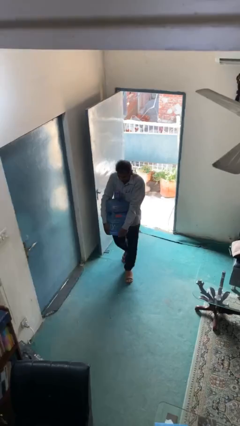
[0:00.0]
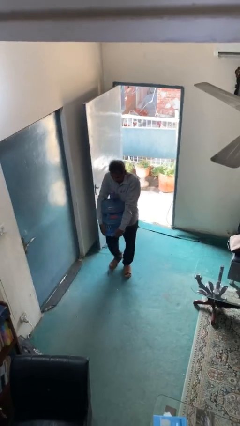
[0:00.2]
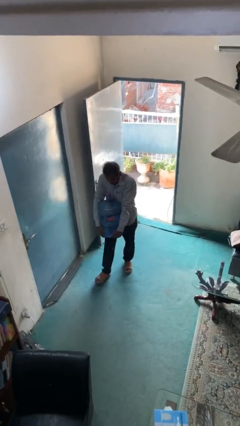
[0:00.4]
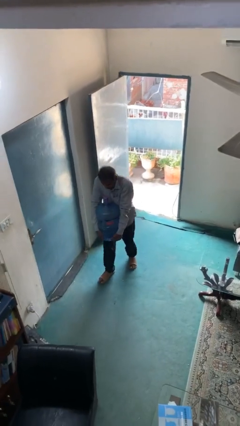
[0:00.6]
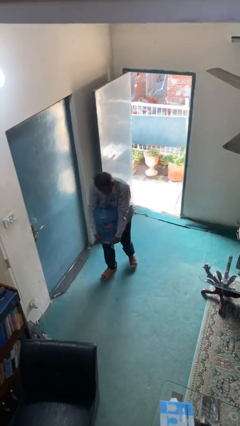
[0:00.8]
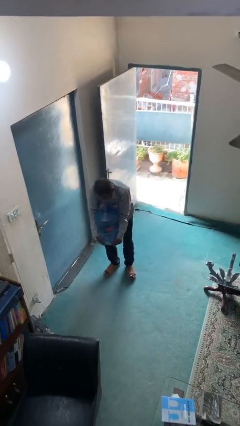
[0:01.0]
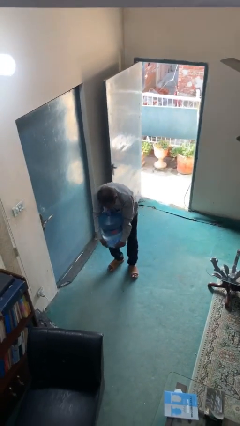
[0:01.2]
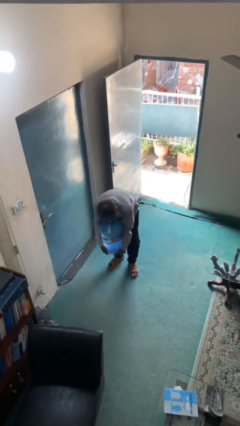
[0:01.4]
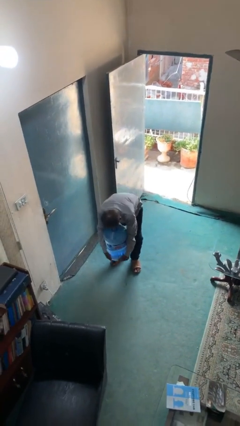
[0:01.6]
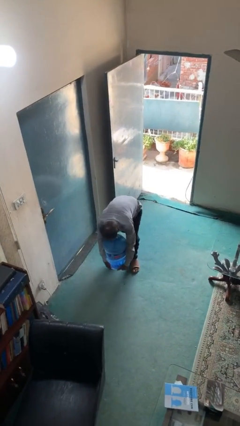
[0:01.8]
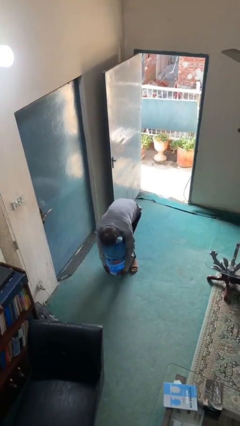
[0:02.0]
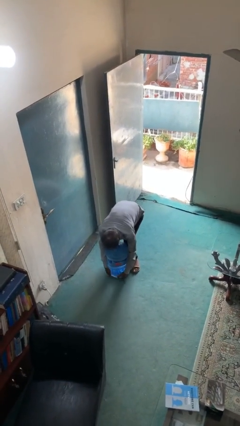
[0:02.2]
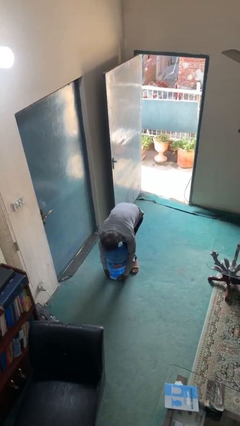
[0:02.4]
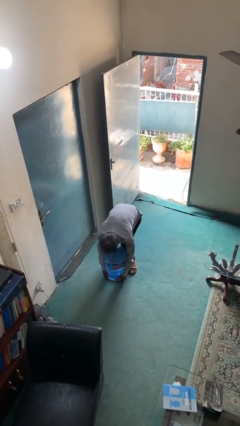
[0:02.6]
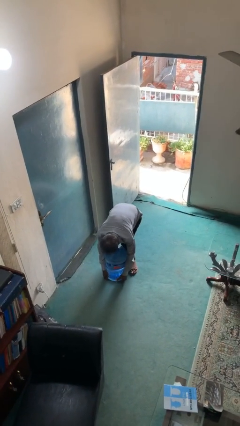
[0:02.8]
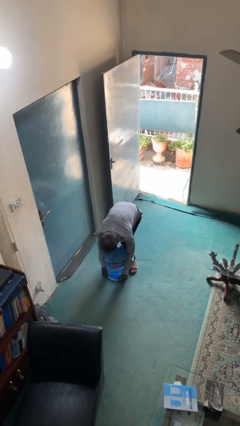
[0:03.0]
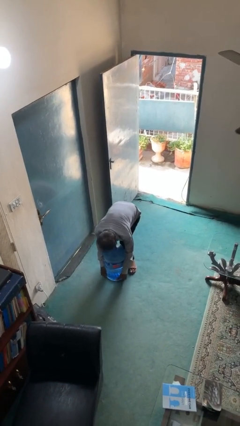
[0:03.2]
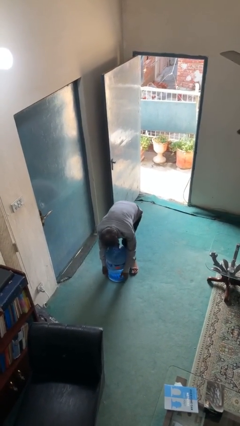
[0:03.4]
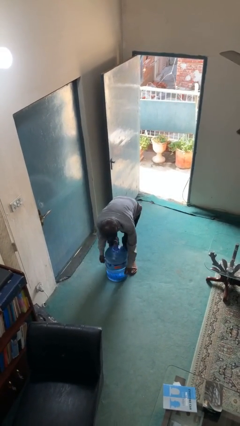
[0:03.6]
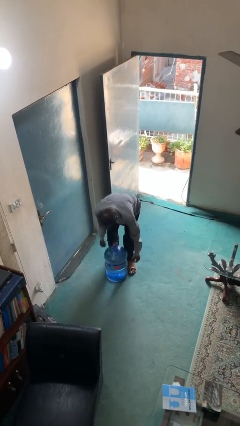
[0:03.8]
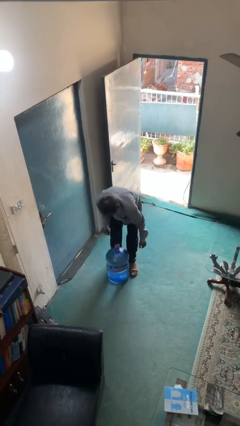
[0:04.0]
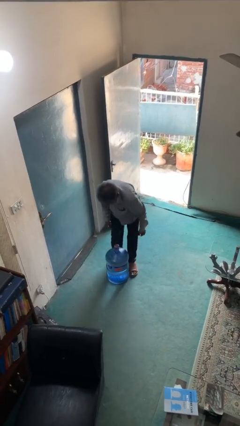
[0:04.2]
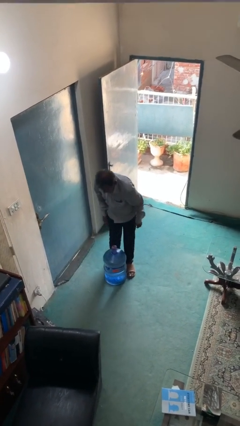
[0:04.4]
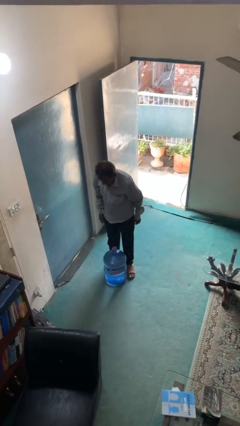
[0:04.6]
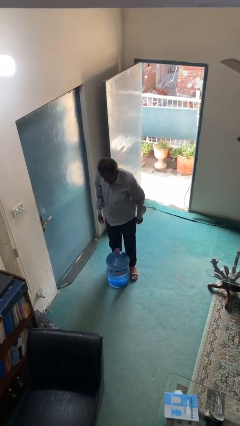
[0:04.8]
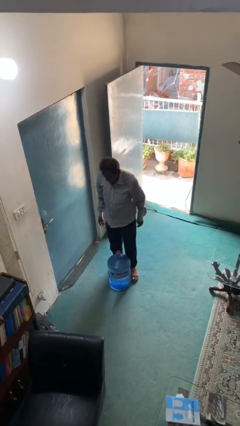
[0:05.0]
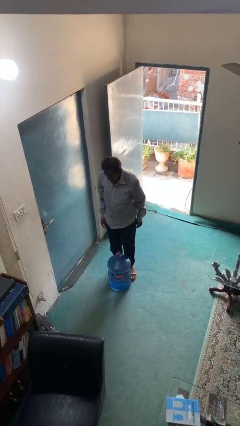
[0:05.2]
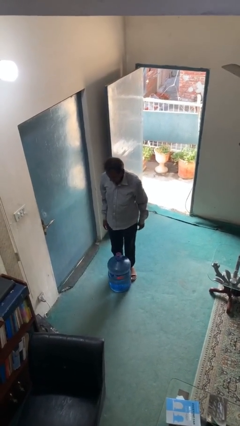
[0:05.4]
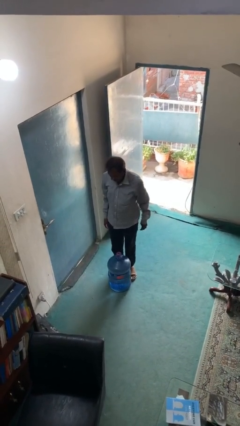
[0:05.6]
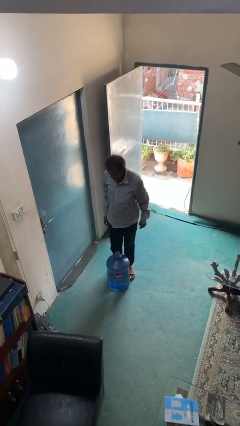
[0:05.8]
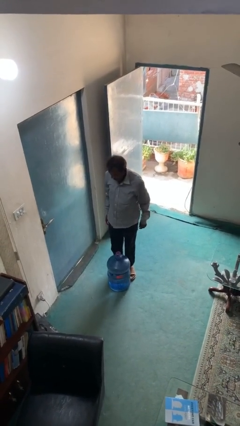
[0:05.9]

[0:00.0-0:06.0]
person puts down object on floor

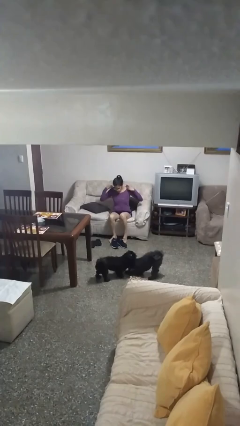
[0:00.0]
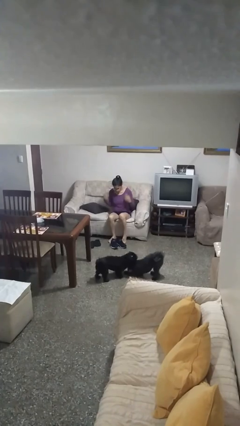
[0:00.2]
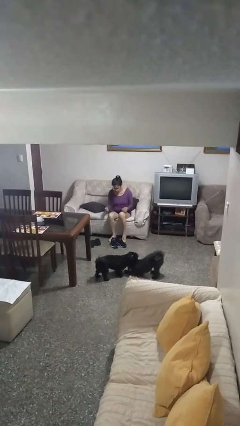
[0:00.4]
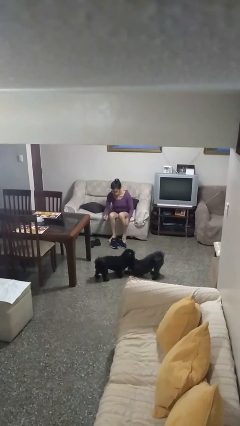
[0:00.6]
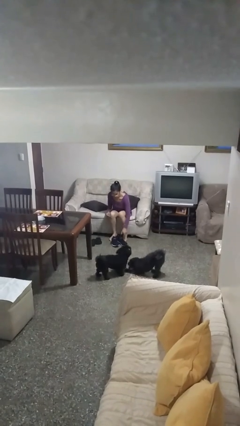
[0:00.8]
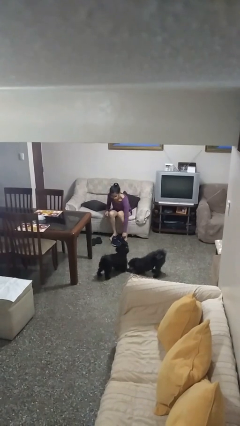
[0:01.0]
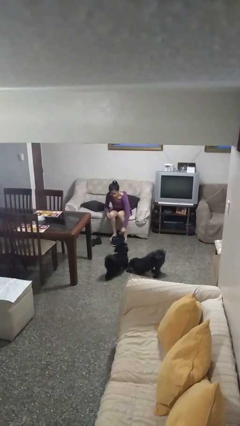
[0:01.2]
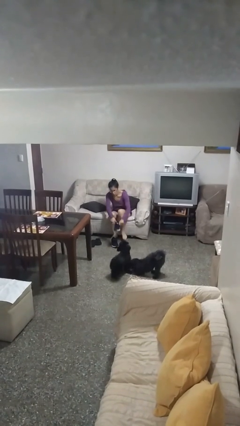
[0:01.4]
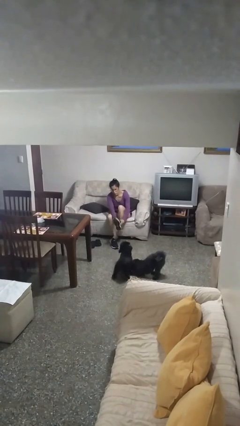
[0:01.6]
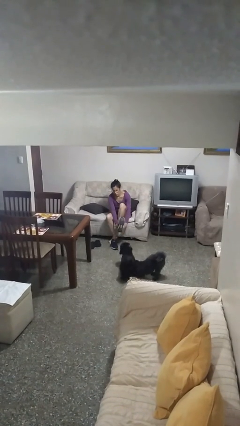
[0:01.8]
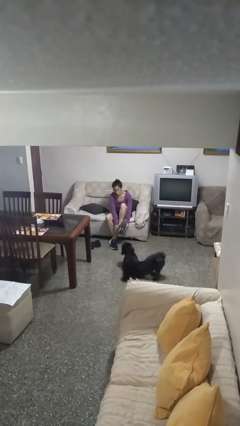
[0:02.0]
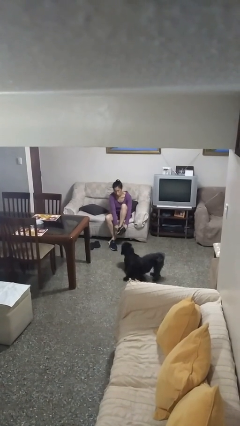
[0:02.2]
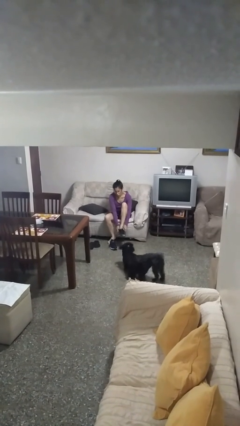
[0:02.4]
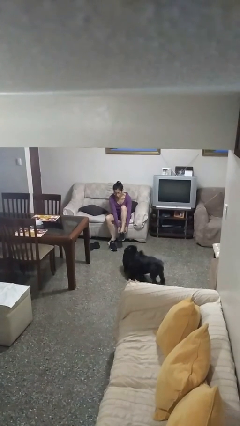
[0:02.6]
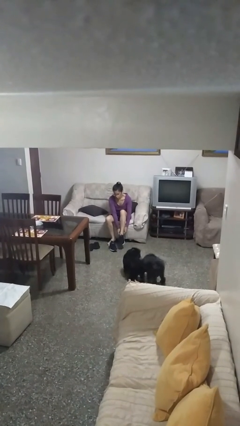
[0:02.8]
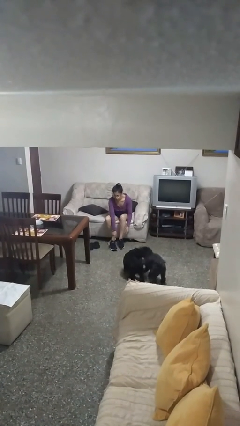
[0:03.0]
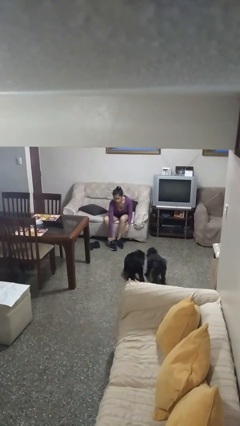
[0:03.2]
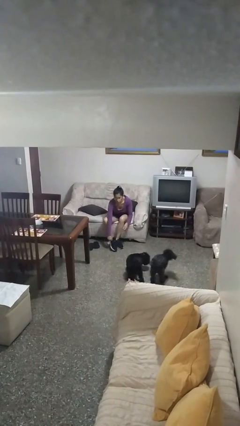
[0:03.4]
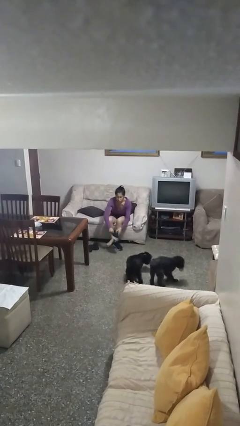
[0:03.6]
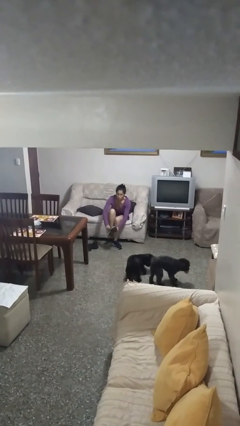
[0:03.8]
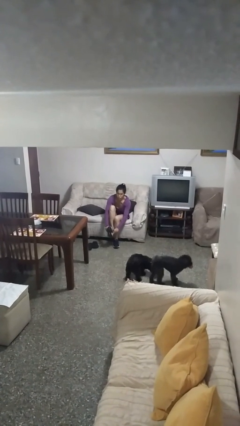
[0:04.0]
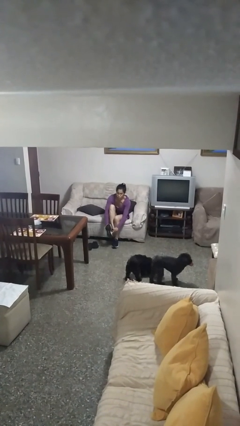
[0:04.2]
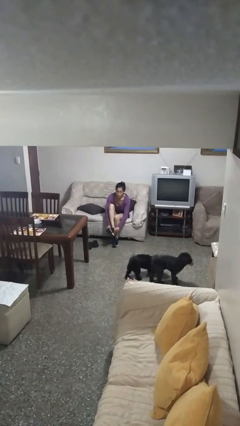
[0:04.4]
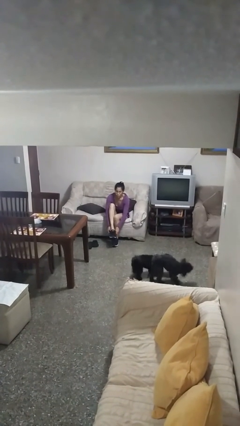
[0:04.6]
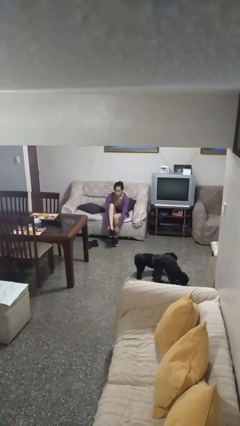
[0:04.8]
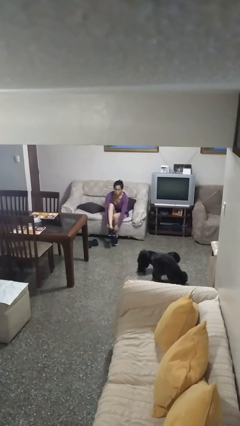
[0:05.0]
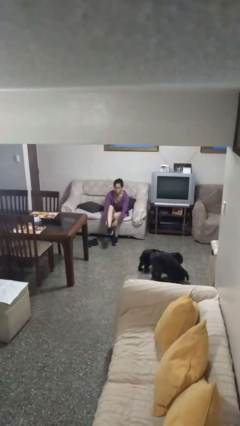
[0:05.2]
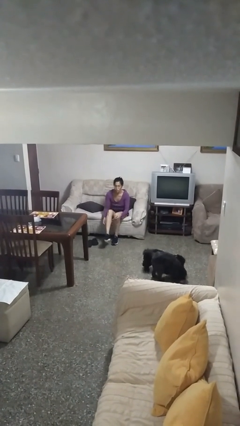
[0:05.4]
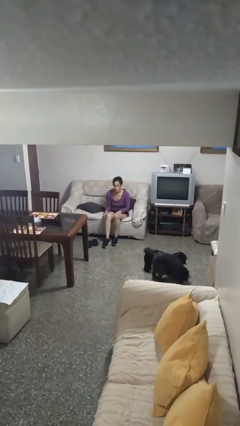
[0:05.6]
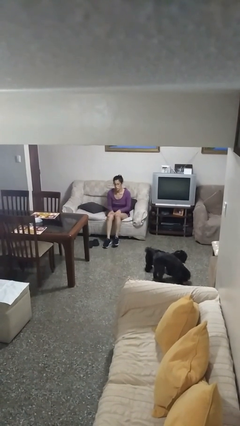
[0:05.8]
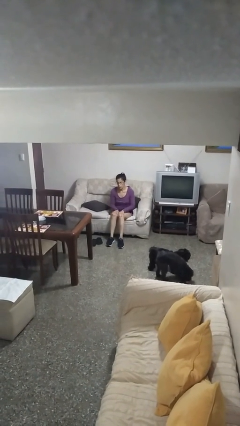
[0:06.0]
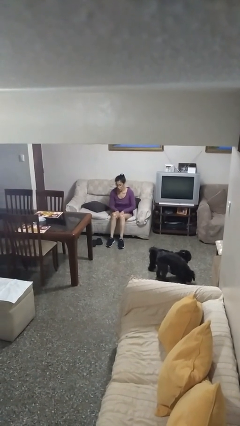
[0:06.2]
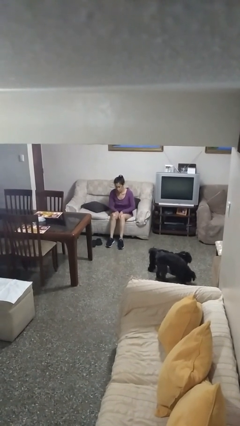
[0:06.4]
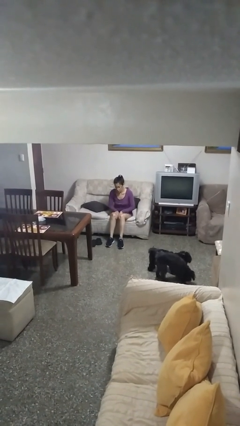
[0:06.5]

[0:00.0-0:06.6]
person puts on shoes

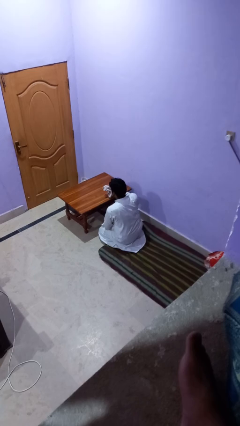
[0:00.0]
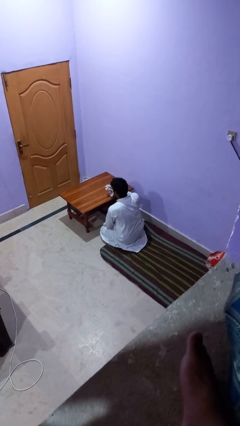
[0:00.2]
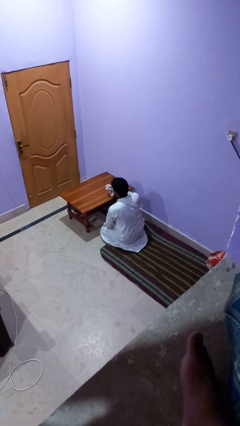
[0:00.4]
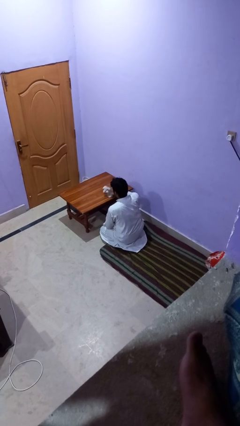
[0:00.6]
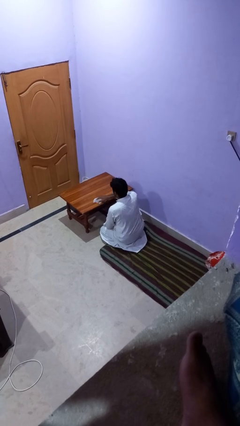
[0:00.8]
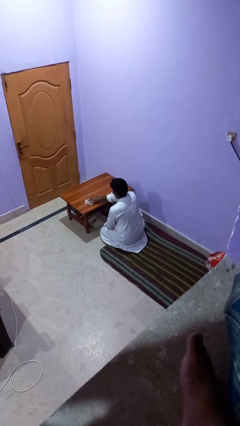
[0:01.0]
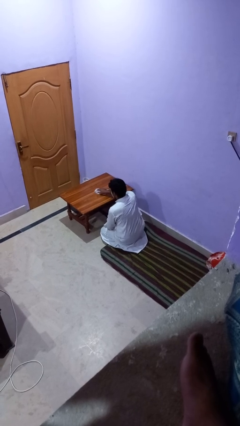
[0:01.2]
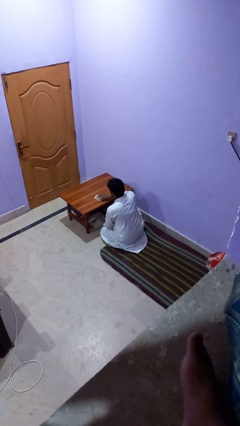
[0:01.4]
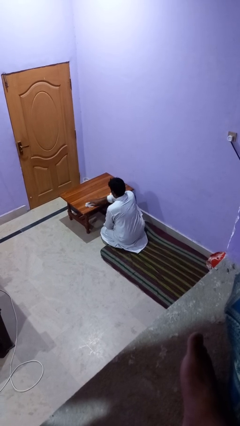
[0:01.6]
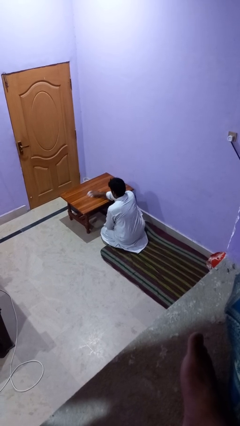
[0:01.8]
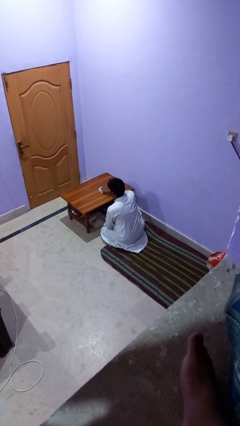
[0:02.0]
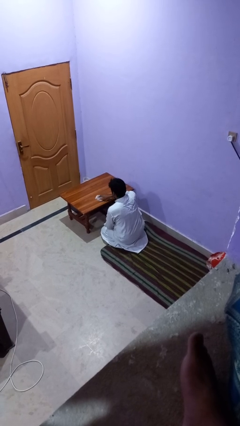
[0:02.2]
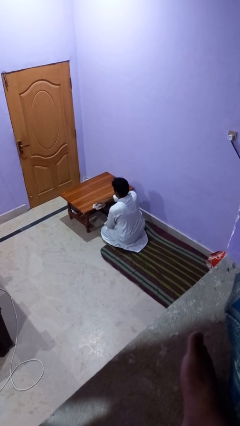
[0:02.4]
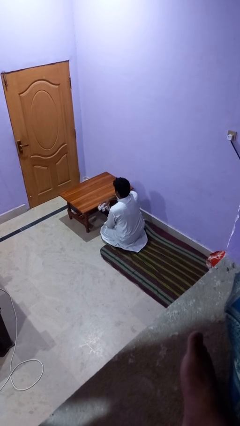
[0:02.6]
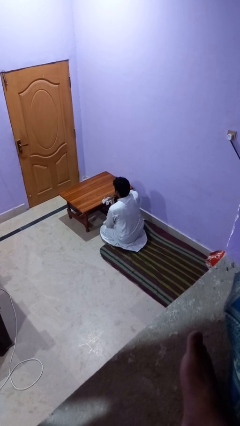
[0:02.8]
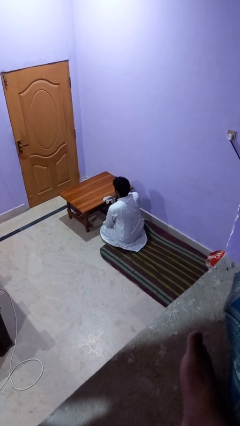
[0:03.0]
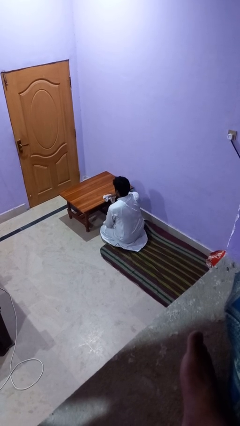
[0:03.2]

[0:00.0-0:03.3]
person cleans table with rag

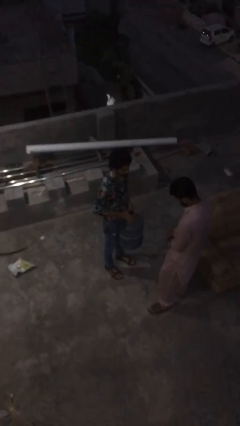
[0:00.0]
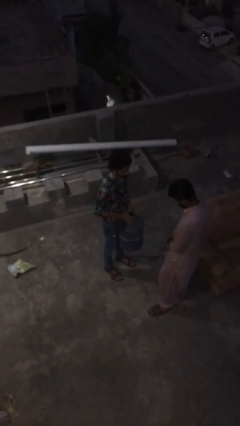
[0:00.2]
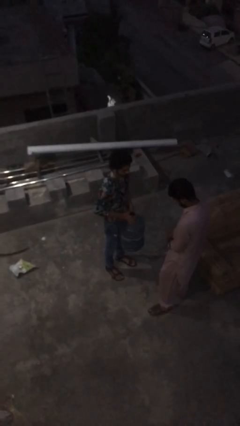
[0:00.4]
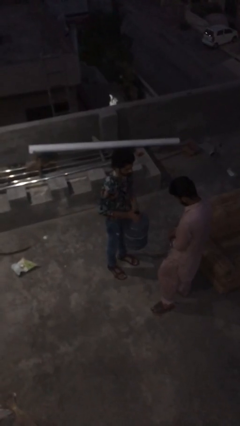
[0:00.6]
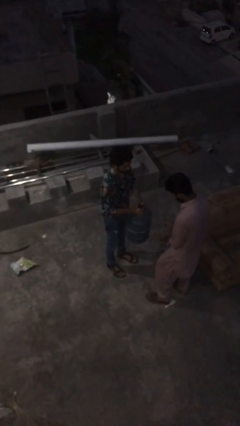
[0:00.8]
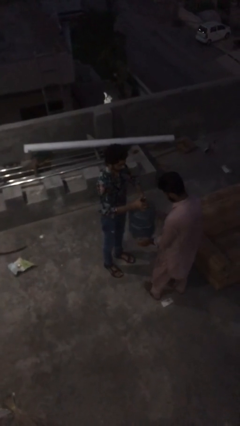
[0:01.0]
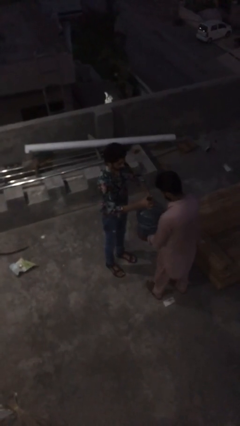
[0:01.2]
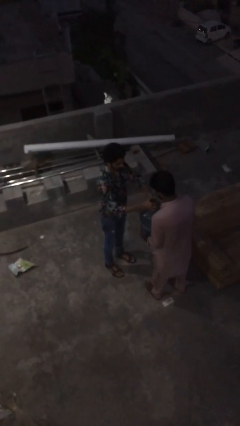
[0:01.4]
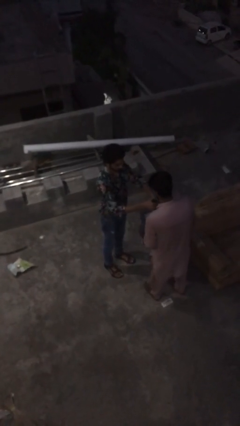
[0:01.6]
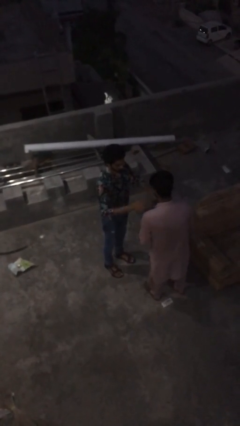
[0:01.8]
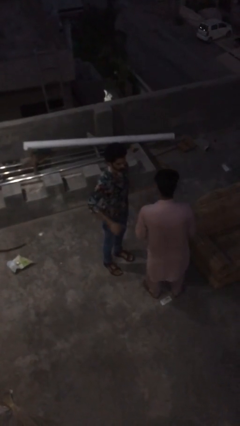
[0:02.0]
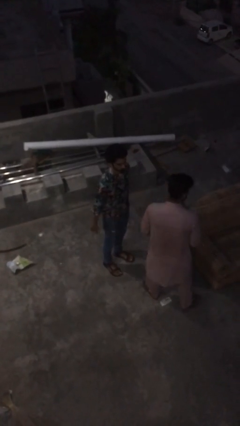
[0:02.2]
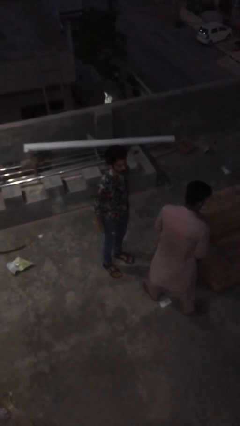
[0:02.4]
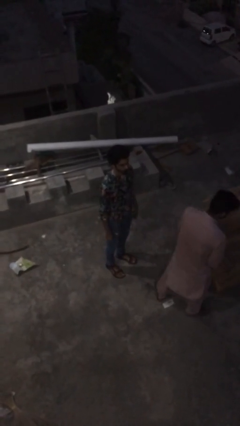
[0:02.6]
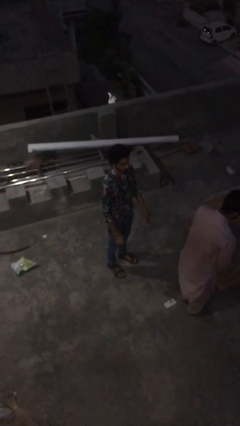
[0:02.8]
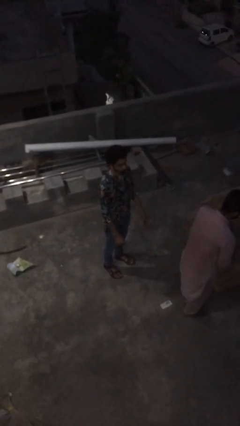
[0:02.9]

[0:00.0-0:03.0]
person transfers object to person
